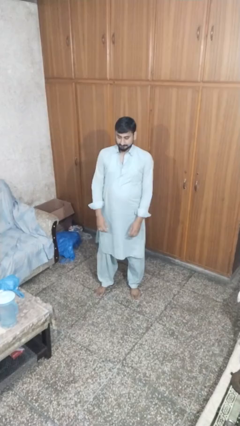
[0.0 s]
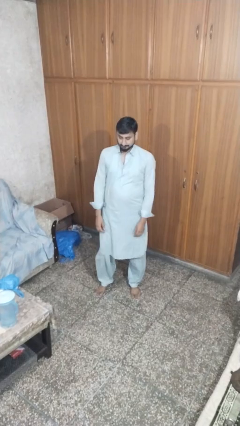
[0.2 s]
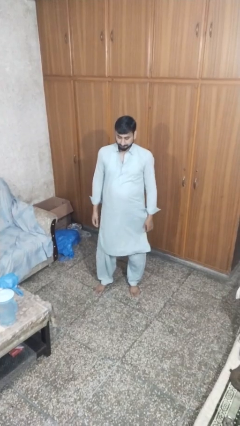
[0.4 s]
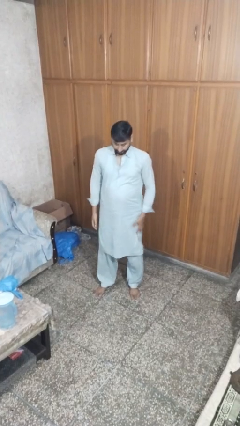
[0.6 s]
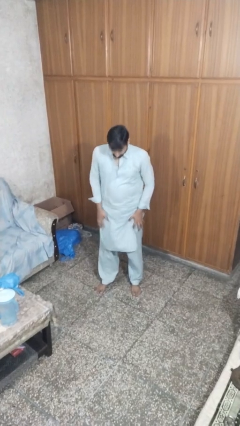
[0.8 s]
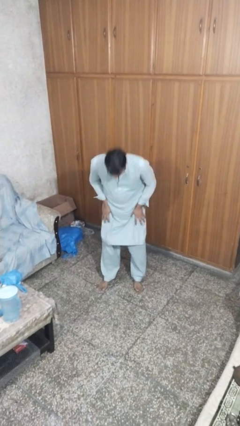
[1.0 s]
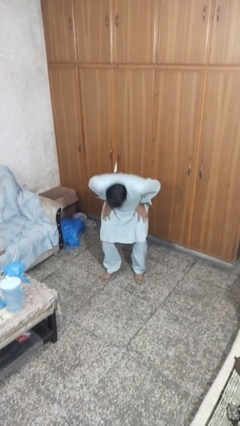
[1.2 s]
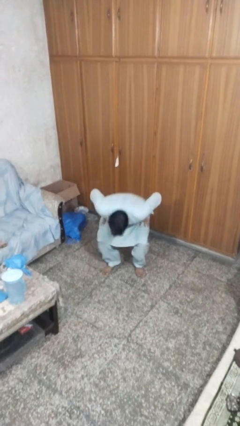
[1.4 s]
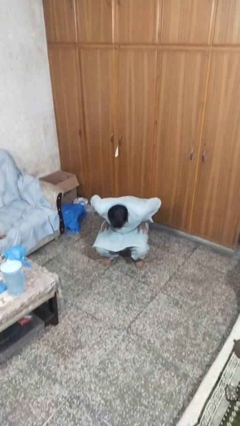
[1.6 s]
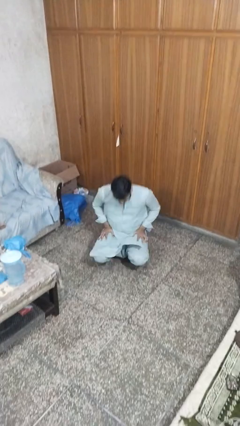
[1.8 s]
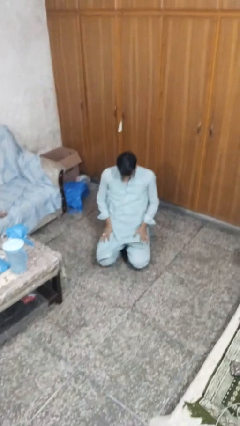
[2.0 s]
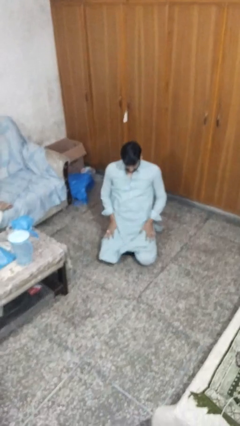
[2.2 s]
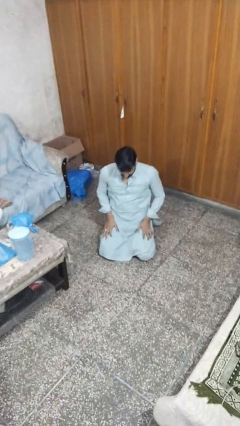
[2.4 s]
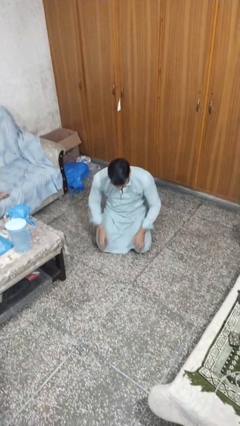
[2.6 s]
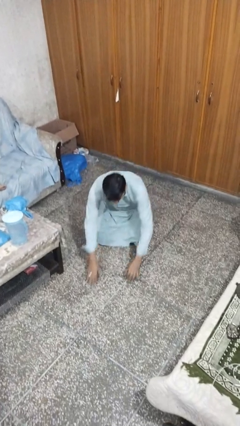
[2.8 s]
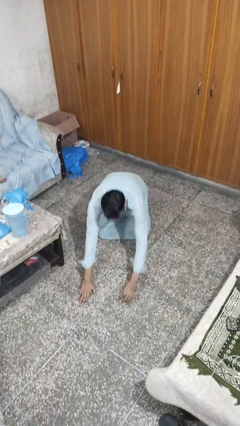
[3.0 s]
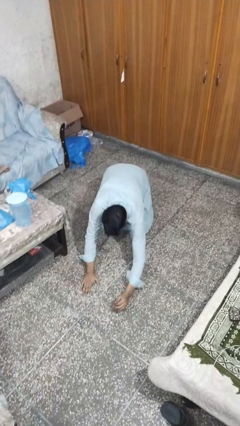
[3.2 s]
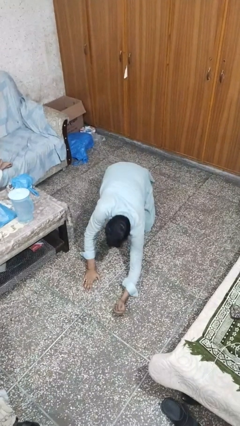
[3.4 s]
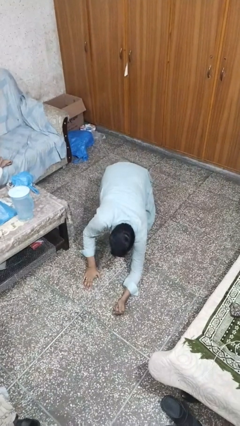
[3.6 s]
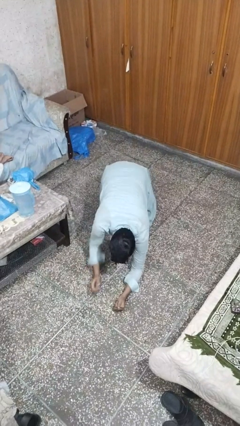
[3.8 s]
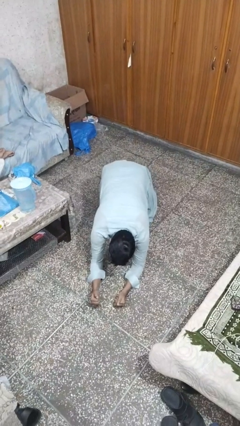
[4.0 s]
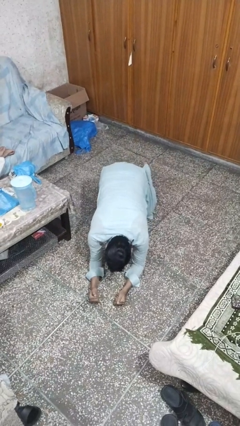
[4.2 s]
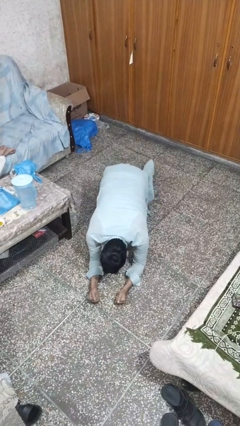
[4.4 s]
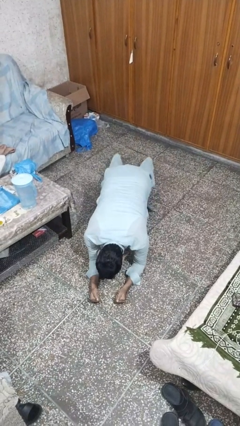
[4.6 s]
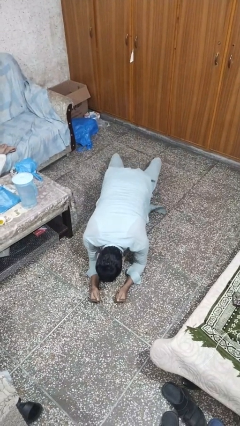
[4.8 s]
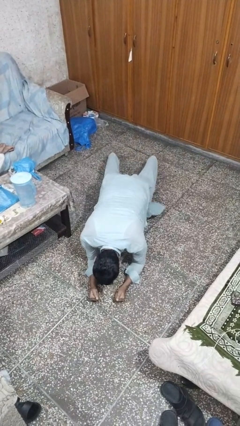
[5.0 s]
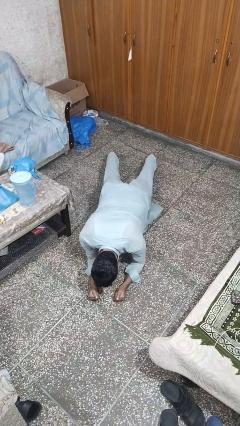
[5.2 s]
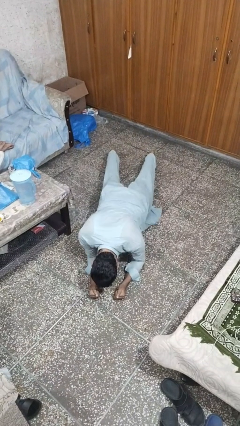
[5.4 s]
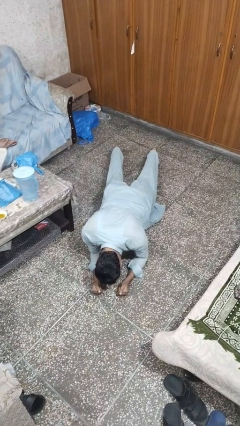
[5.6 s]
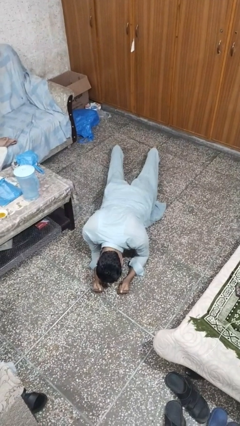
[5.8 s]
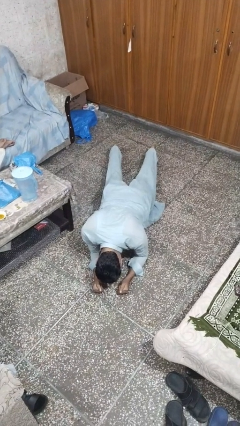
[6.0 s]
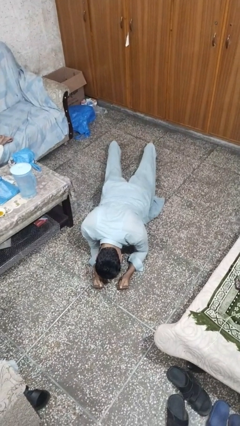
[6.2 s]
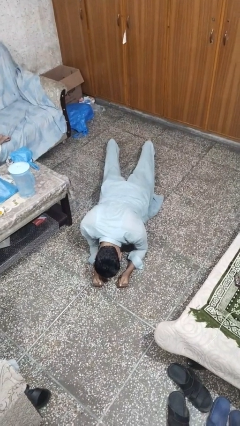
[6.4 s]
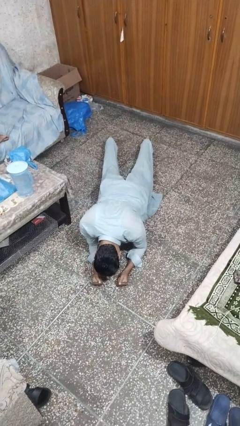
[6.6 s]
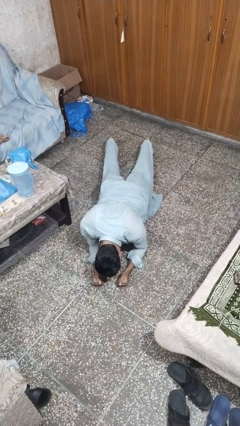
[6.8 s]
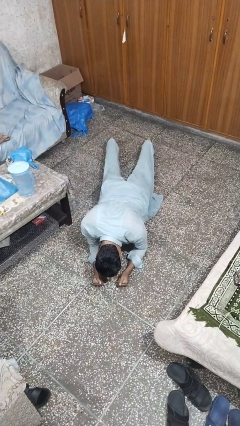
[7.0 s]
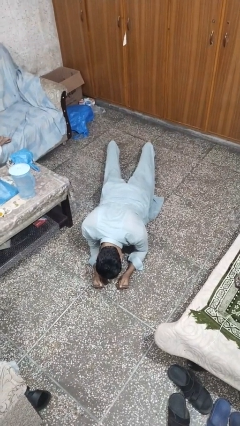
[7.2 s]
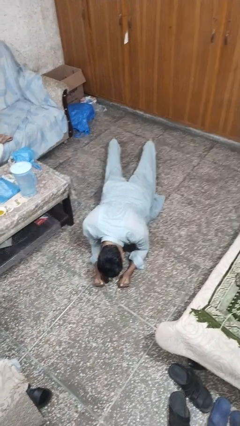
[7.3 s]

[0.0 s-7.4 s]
person exercises with plank

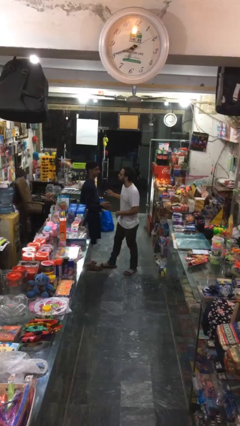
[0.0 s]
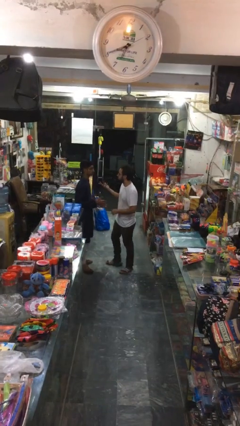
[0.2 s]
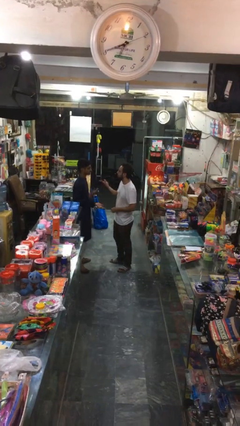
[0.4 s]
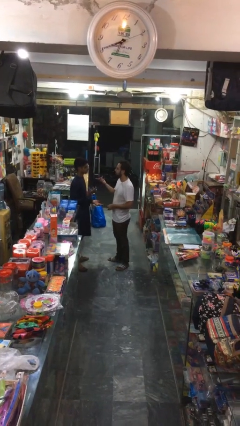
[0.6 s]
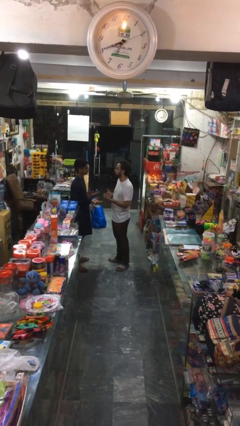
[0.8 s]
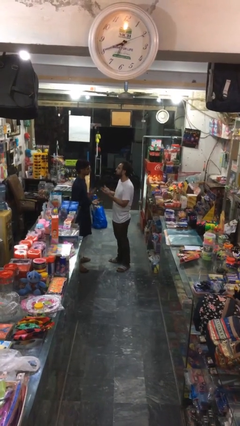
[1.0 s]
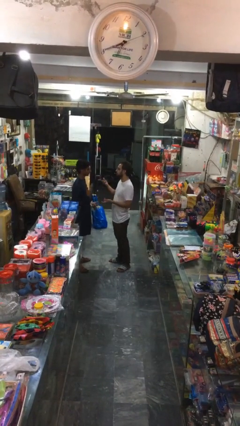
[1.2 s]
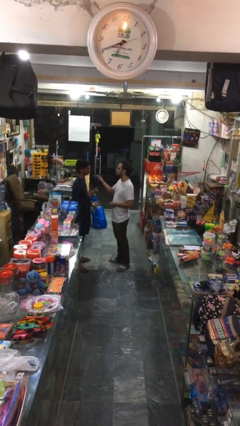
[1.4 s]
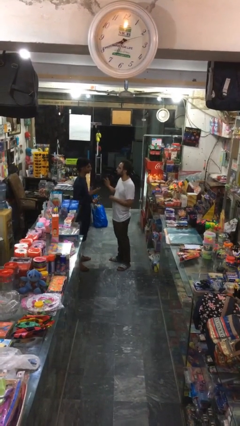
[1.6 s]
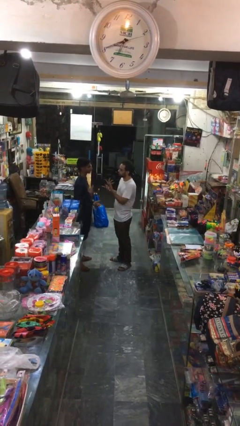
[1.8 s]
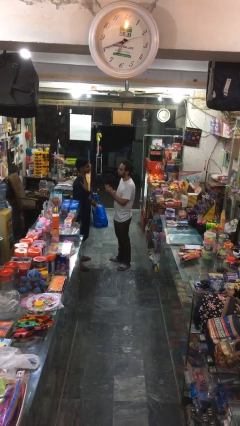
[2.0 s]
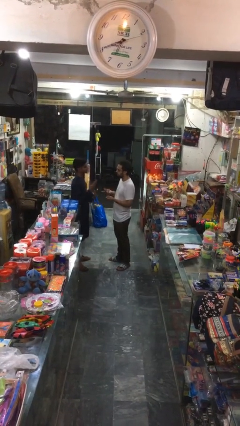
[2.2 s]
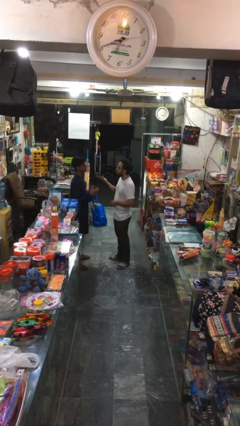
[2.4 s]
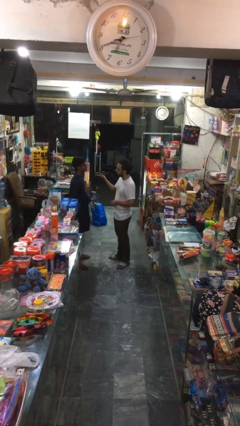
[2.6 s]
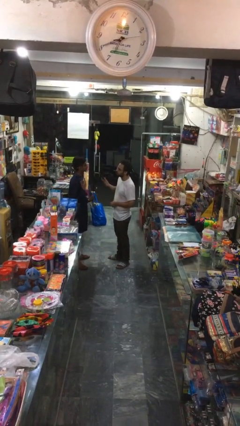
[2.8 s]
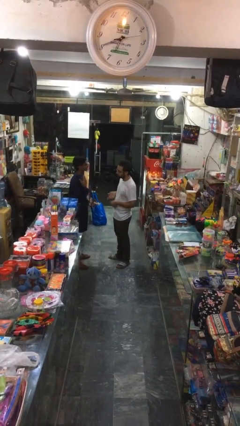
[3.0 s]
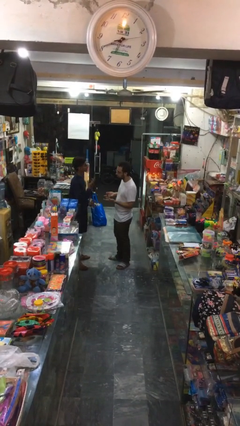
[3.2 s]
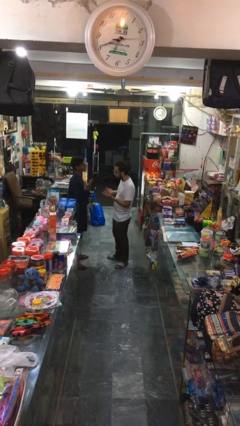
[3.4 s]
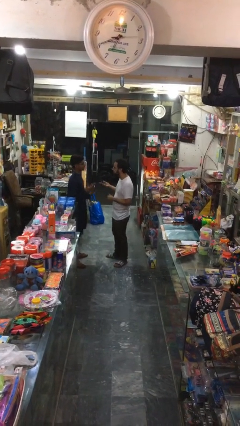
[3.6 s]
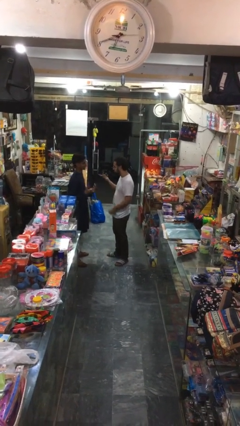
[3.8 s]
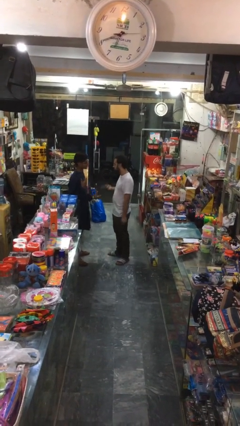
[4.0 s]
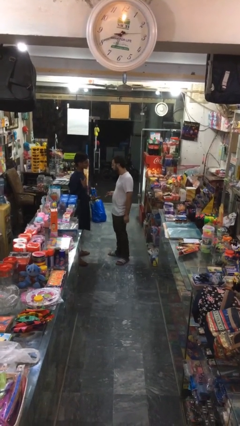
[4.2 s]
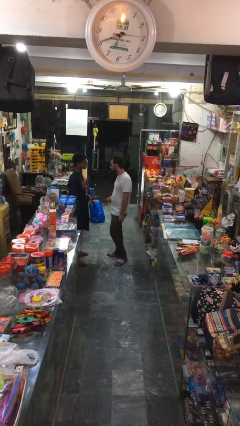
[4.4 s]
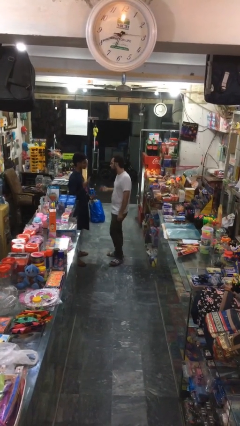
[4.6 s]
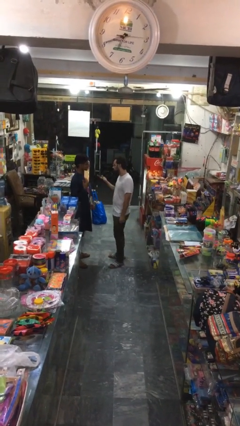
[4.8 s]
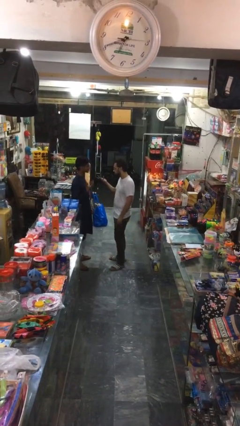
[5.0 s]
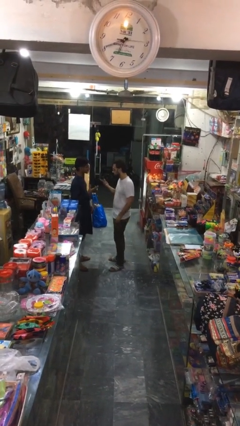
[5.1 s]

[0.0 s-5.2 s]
person talks to person

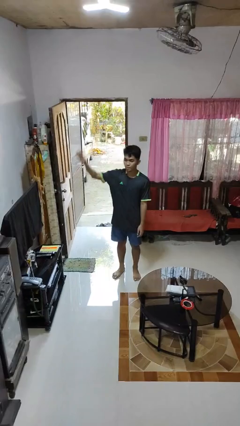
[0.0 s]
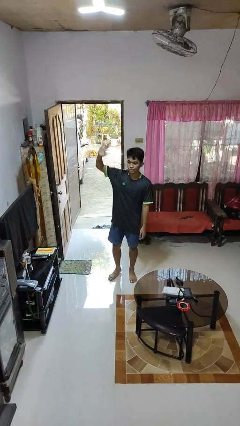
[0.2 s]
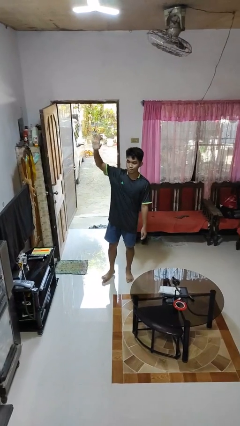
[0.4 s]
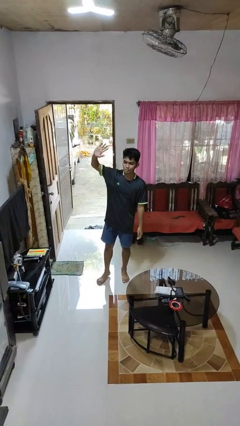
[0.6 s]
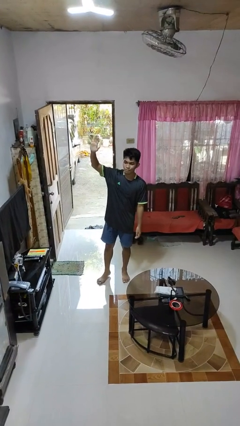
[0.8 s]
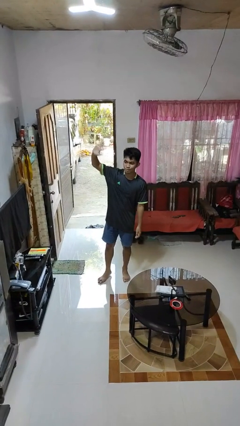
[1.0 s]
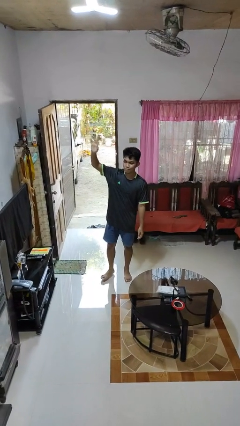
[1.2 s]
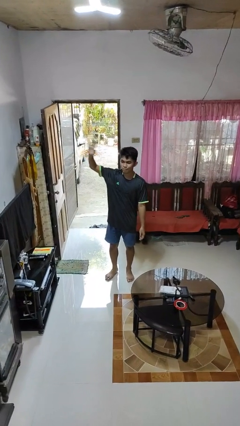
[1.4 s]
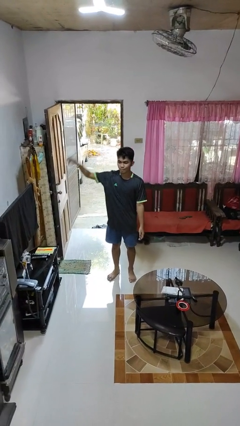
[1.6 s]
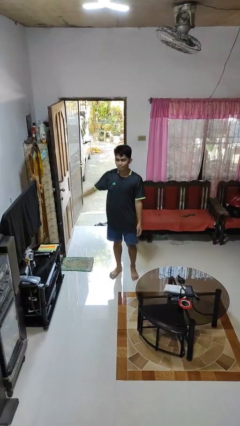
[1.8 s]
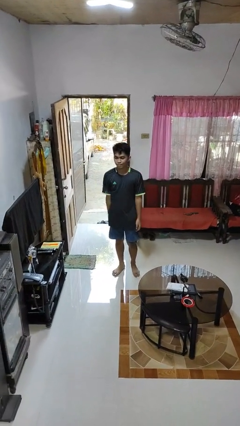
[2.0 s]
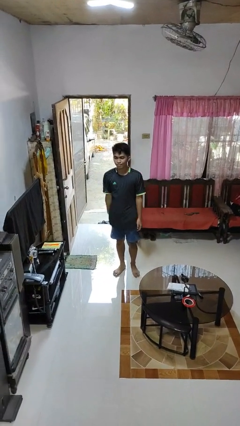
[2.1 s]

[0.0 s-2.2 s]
person waves at person

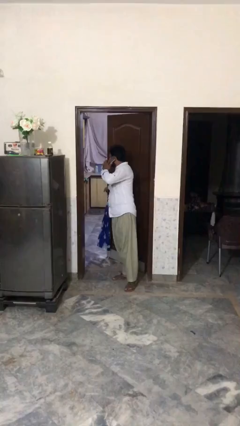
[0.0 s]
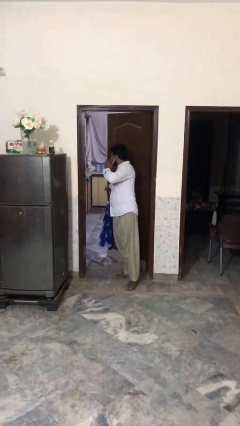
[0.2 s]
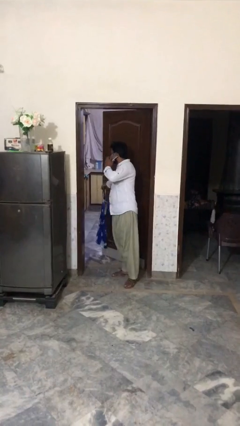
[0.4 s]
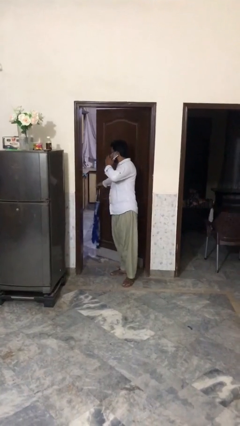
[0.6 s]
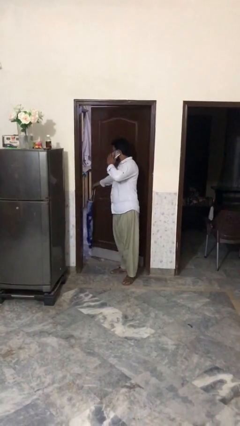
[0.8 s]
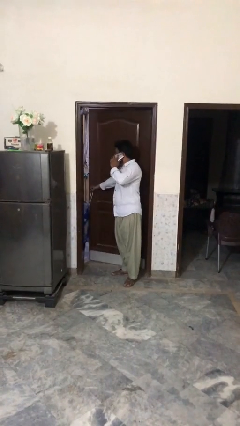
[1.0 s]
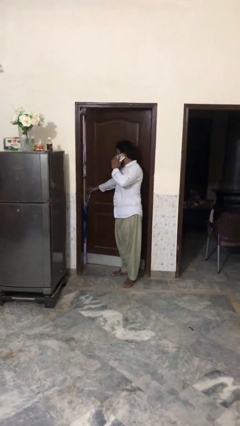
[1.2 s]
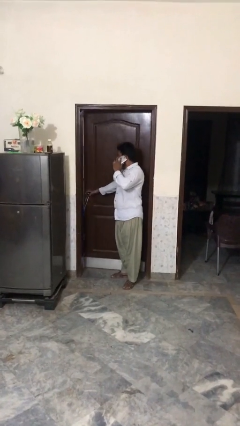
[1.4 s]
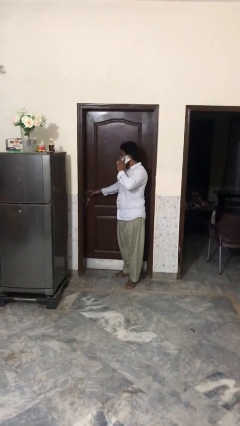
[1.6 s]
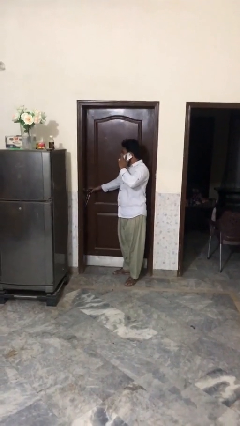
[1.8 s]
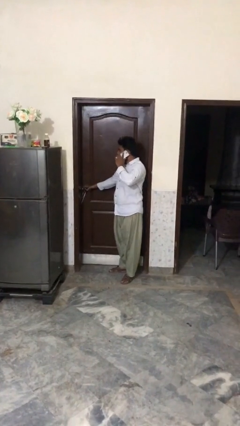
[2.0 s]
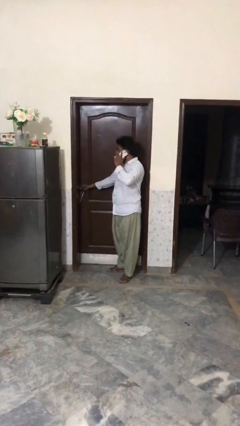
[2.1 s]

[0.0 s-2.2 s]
person closes facility door

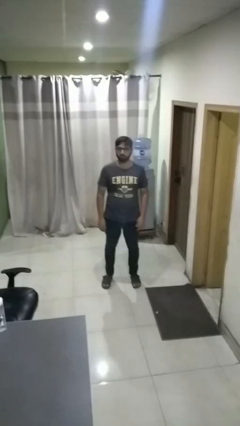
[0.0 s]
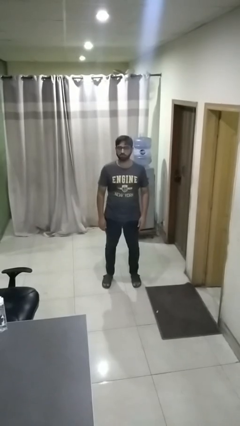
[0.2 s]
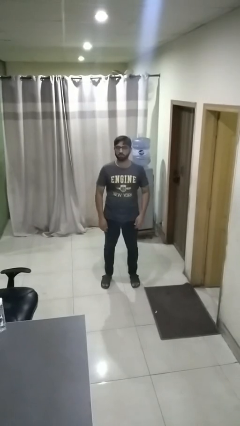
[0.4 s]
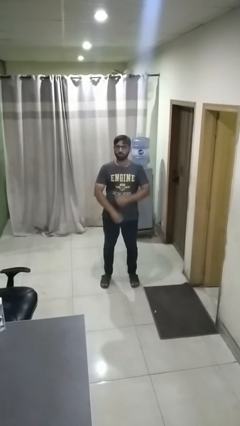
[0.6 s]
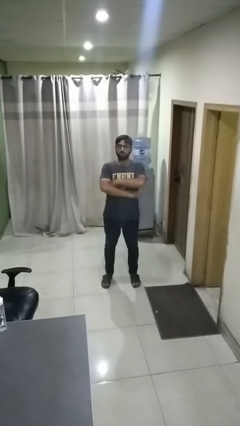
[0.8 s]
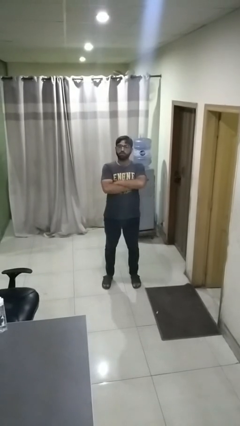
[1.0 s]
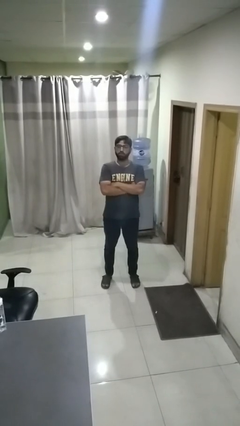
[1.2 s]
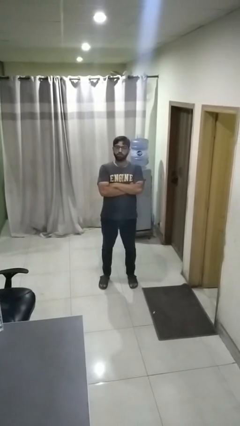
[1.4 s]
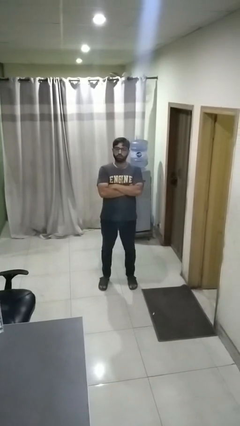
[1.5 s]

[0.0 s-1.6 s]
person crosses arms
